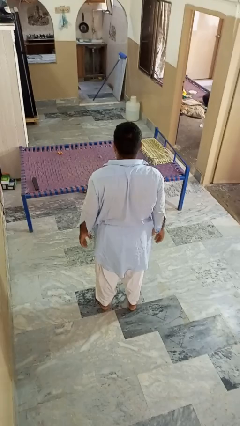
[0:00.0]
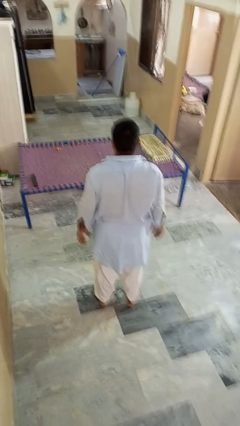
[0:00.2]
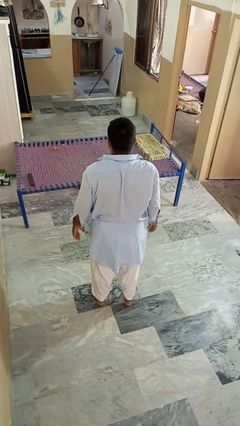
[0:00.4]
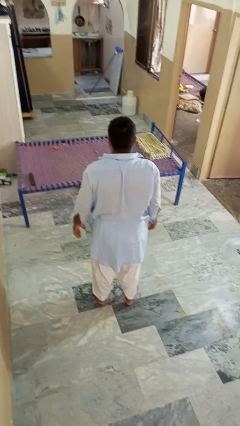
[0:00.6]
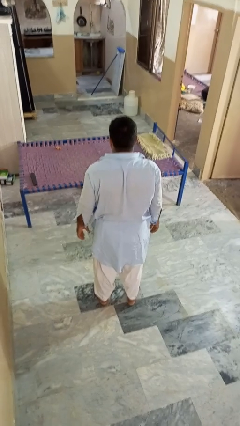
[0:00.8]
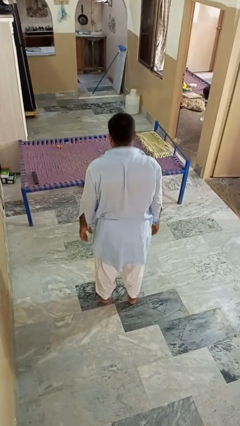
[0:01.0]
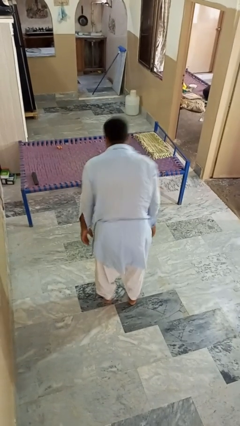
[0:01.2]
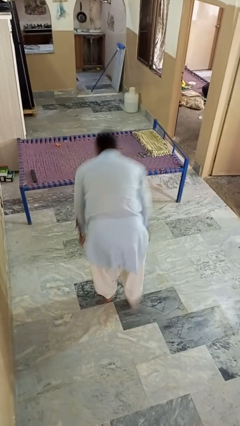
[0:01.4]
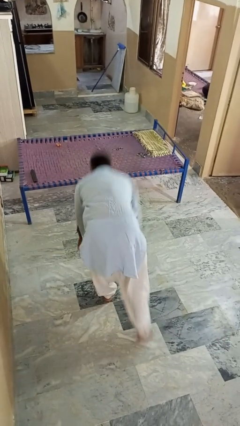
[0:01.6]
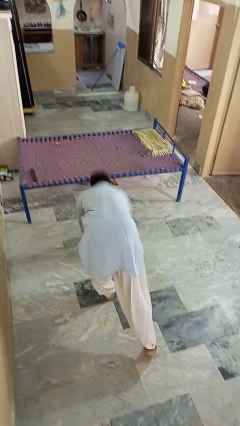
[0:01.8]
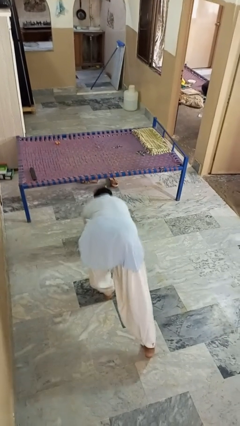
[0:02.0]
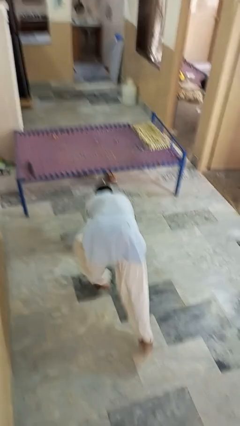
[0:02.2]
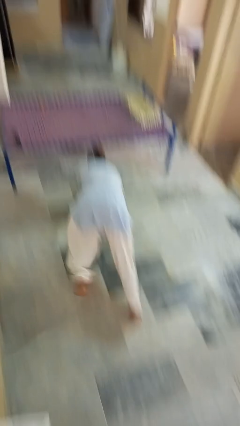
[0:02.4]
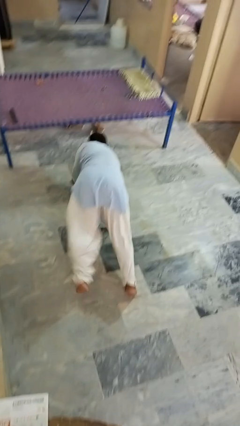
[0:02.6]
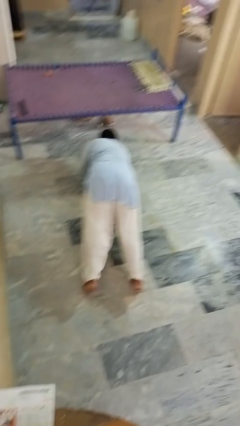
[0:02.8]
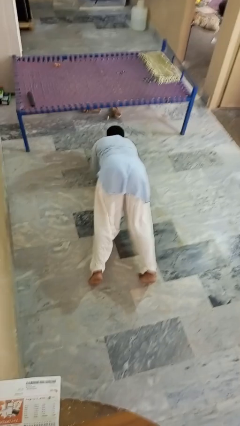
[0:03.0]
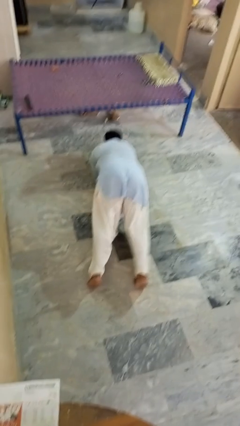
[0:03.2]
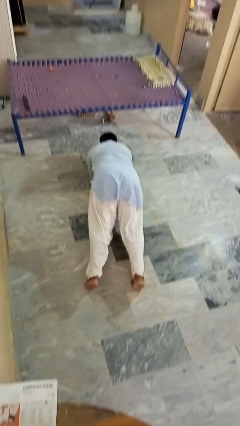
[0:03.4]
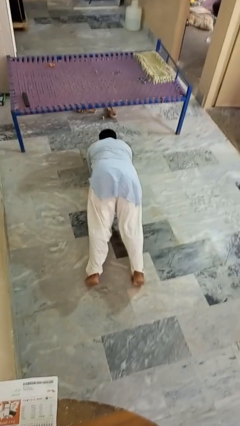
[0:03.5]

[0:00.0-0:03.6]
person exercises with plank

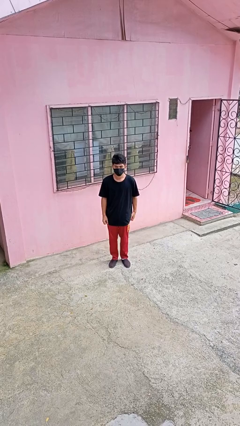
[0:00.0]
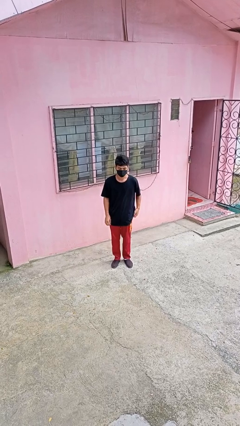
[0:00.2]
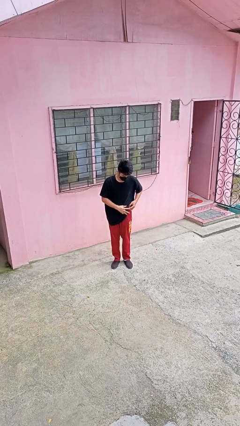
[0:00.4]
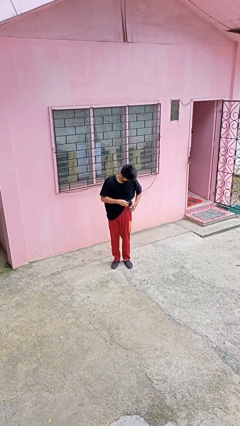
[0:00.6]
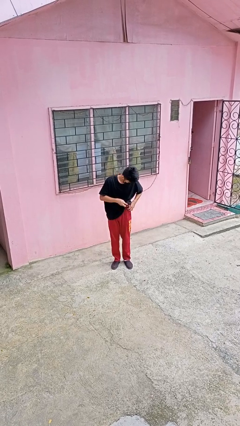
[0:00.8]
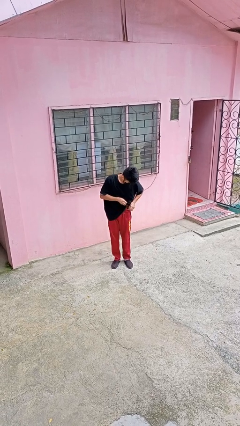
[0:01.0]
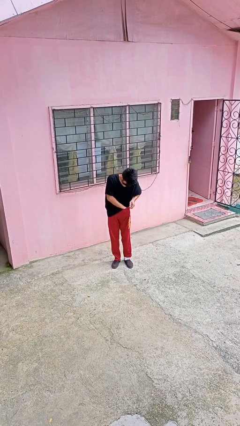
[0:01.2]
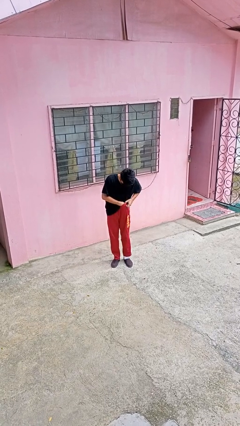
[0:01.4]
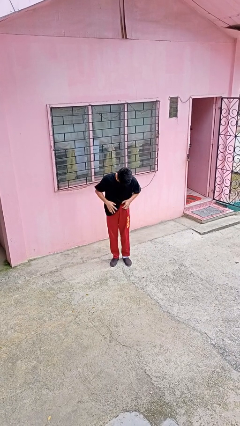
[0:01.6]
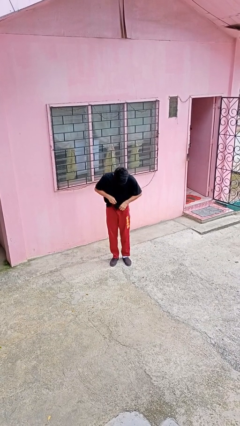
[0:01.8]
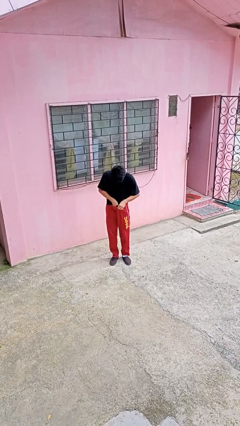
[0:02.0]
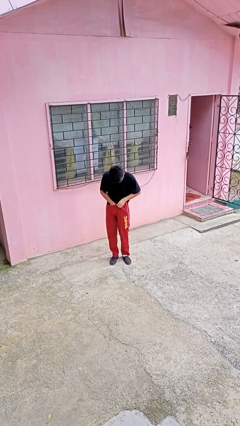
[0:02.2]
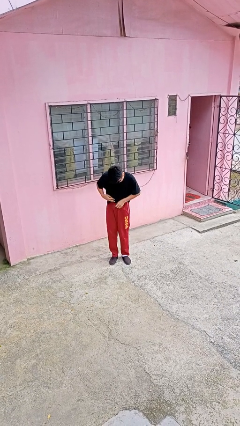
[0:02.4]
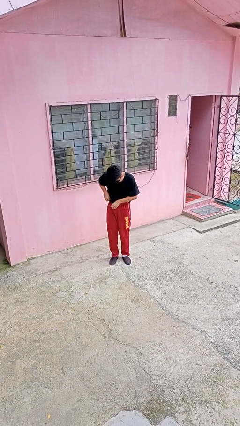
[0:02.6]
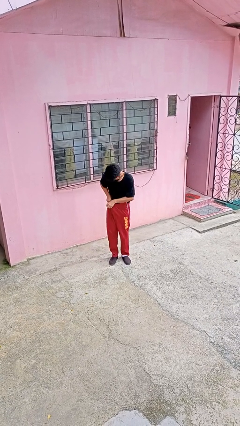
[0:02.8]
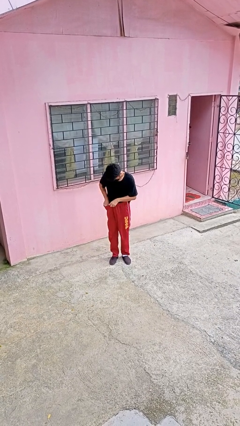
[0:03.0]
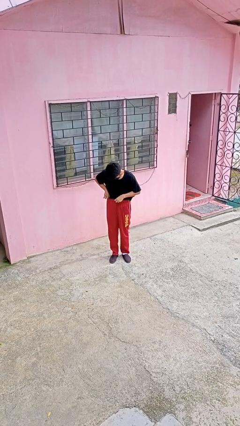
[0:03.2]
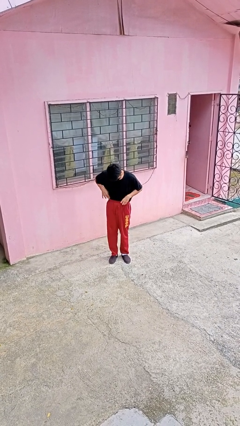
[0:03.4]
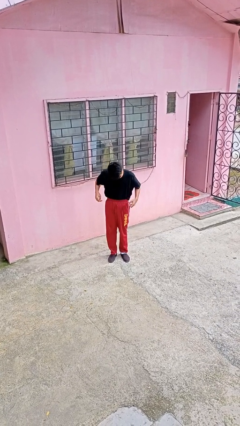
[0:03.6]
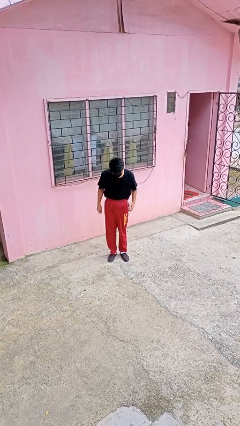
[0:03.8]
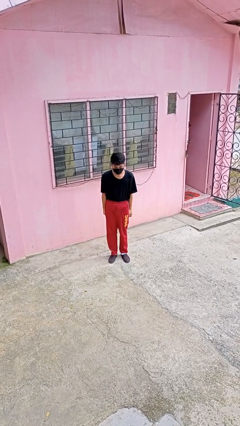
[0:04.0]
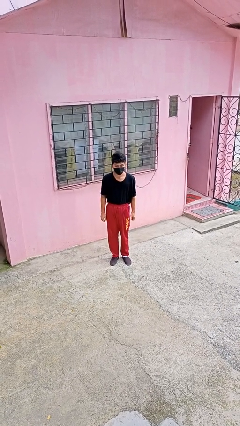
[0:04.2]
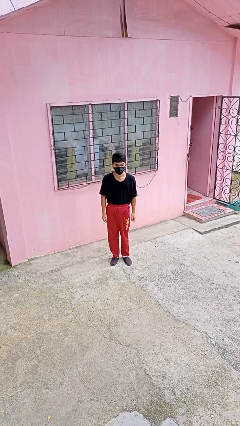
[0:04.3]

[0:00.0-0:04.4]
person tucks in shirt

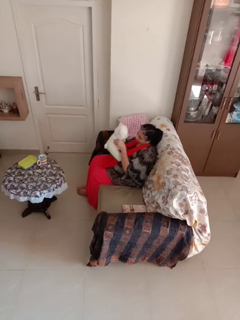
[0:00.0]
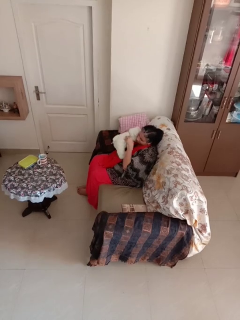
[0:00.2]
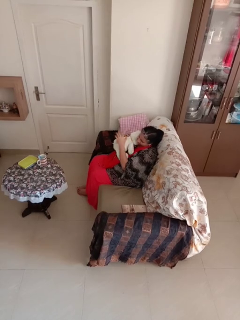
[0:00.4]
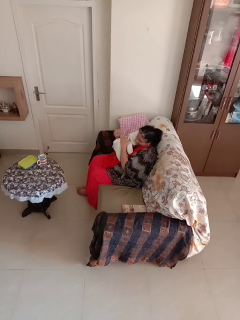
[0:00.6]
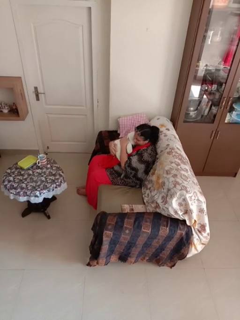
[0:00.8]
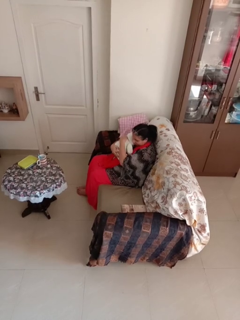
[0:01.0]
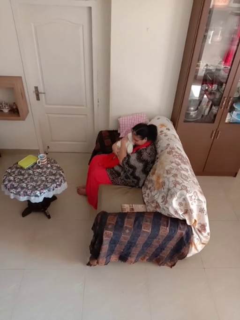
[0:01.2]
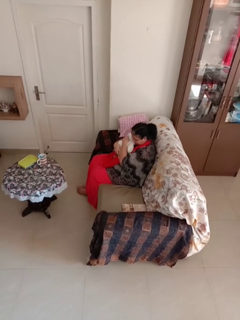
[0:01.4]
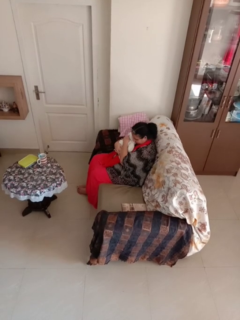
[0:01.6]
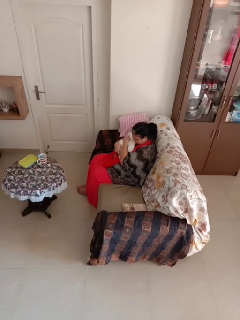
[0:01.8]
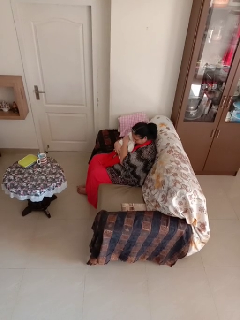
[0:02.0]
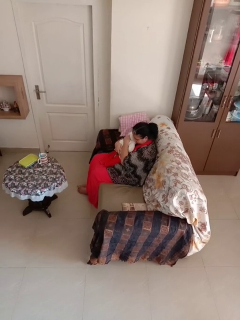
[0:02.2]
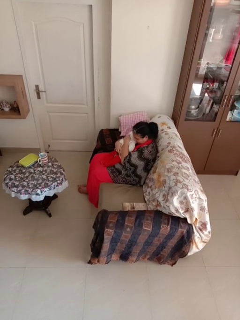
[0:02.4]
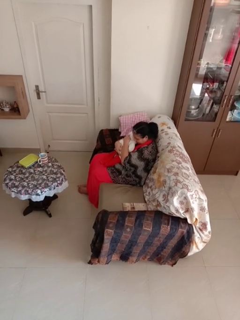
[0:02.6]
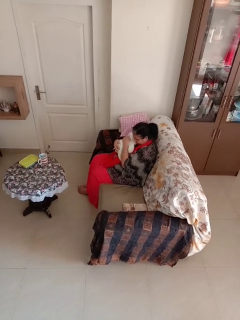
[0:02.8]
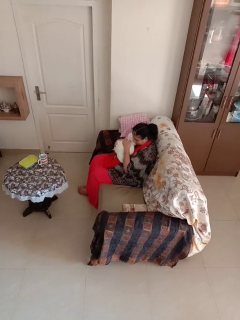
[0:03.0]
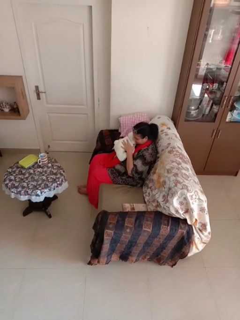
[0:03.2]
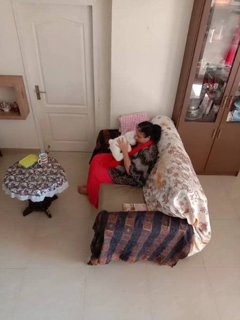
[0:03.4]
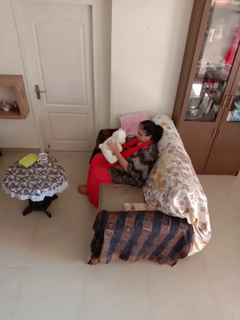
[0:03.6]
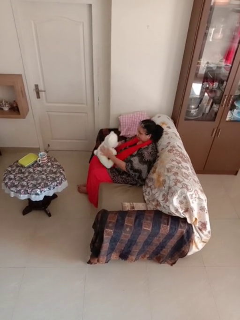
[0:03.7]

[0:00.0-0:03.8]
person hugs stuffed animal

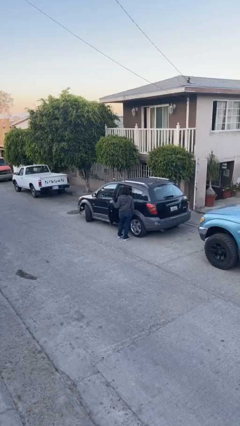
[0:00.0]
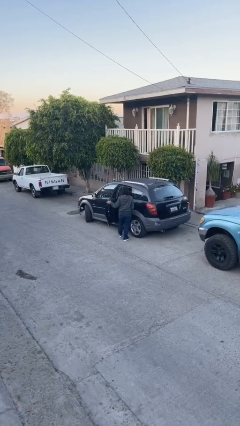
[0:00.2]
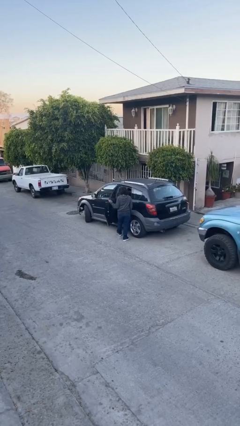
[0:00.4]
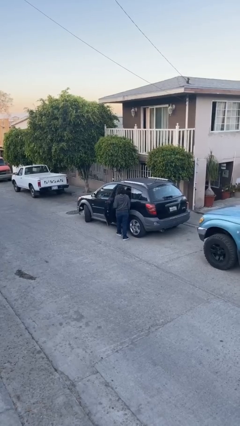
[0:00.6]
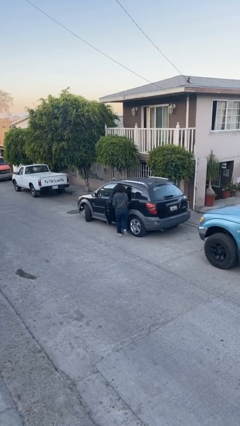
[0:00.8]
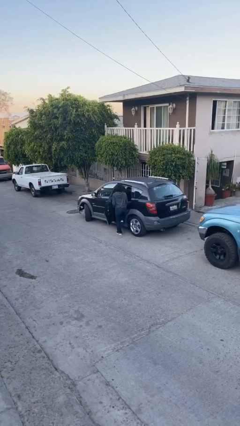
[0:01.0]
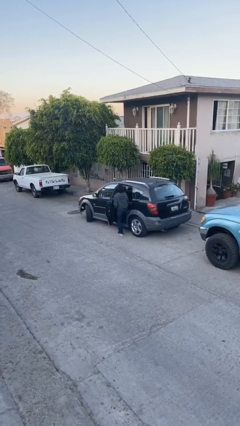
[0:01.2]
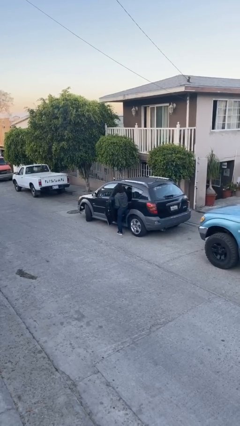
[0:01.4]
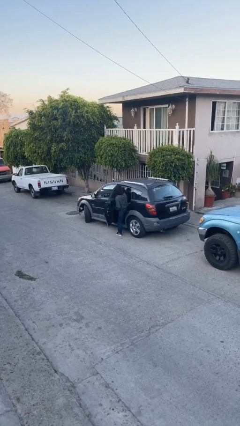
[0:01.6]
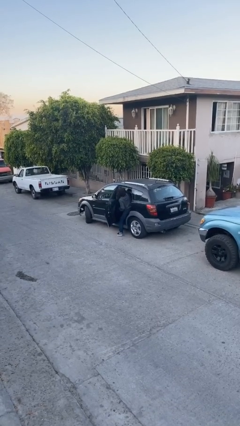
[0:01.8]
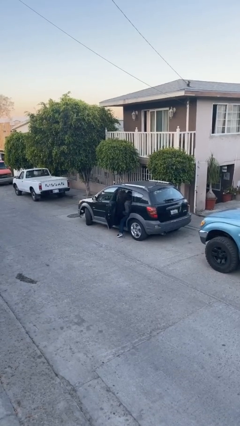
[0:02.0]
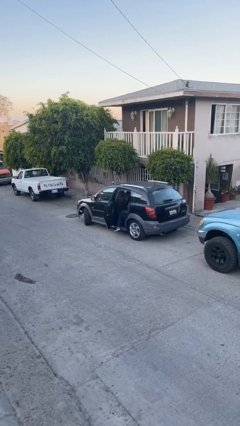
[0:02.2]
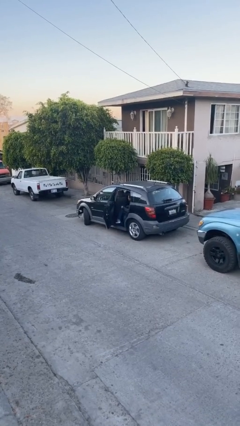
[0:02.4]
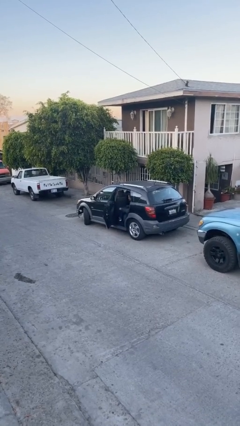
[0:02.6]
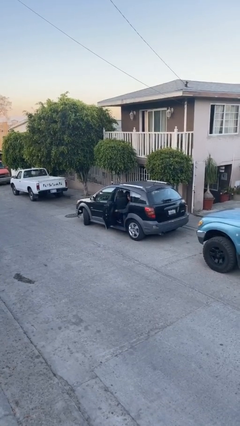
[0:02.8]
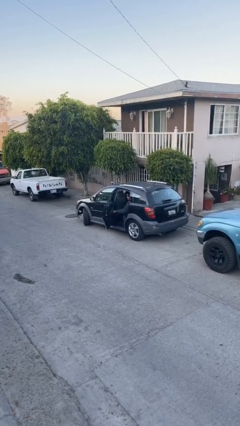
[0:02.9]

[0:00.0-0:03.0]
person enters car

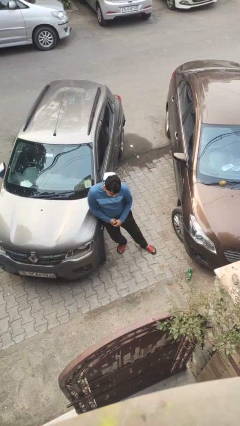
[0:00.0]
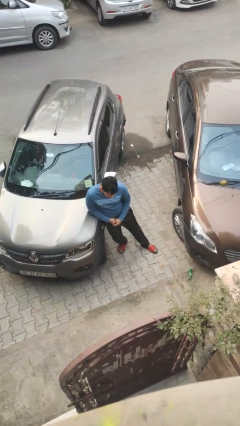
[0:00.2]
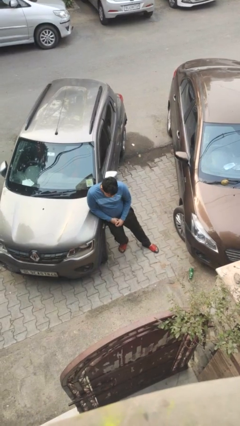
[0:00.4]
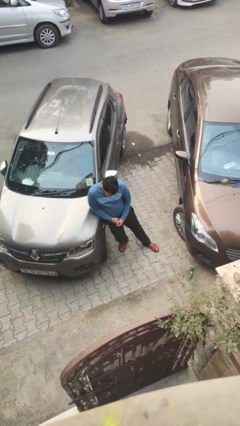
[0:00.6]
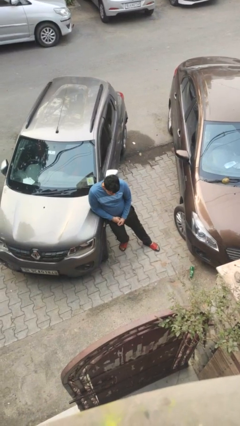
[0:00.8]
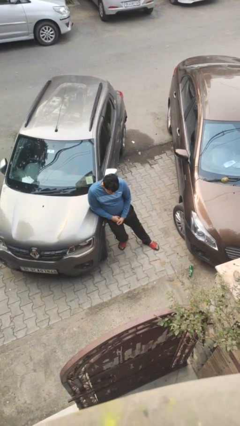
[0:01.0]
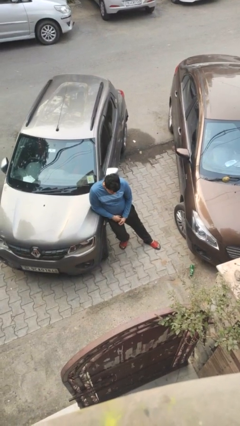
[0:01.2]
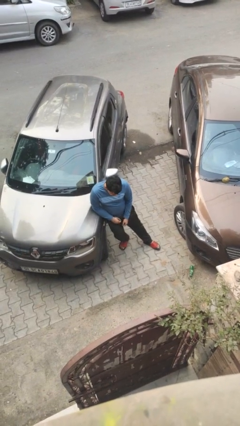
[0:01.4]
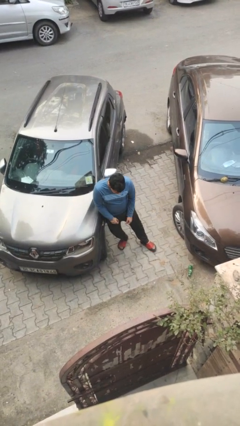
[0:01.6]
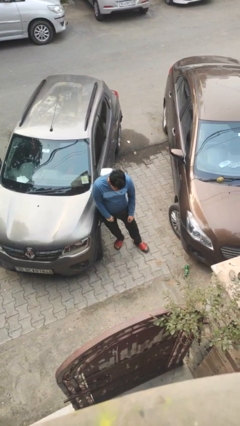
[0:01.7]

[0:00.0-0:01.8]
person leans against car

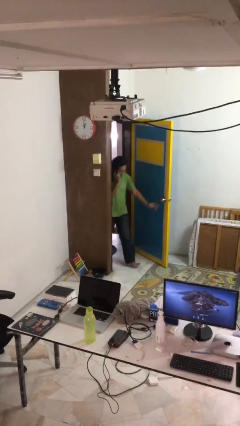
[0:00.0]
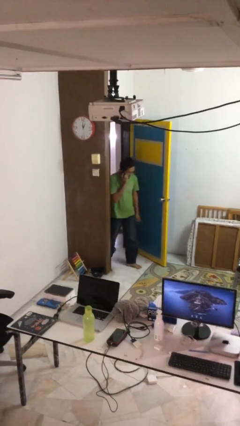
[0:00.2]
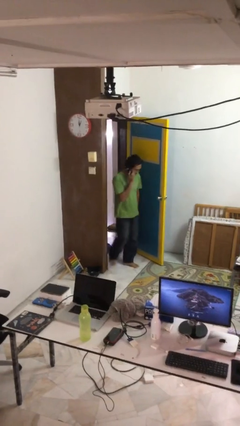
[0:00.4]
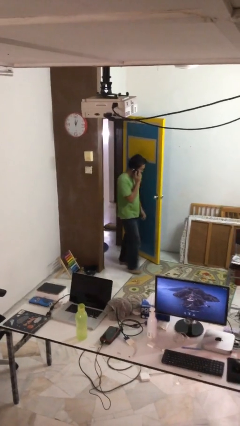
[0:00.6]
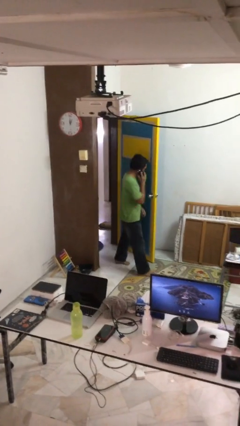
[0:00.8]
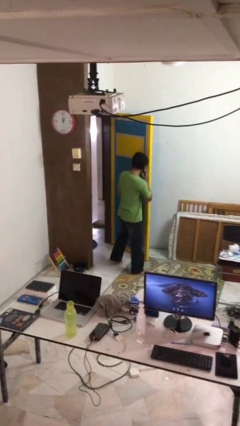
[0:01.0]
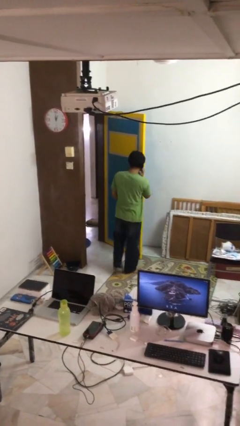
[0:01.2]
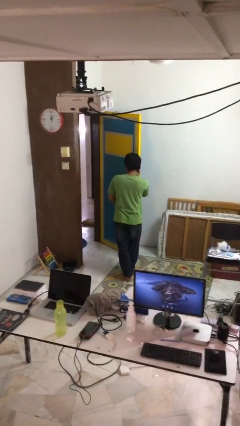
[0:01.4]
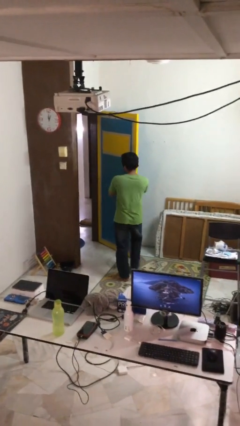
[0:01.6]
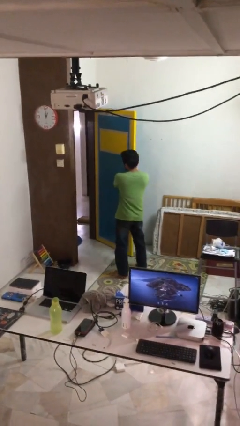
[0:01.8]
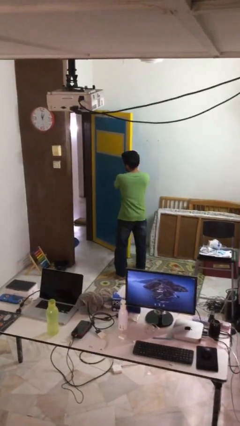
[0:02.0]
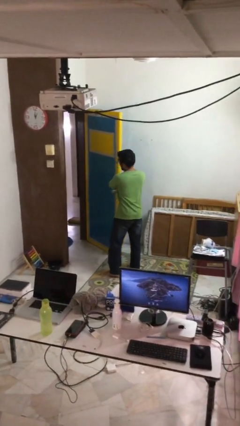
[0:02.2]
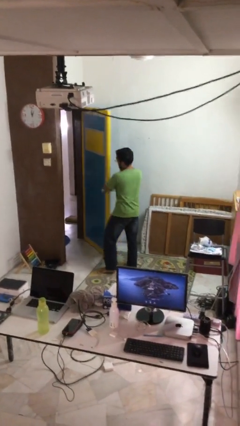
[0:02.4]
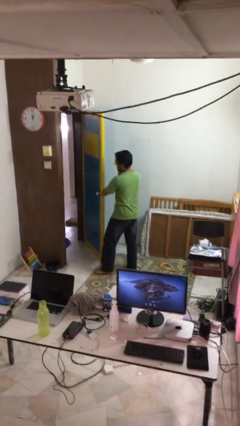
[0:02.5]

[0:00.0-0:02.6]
person enters scene through structure
